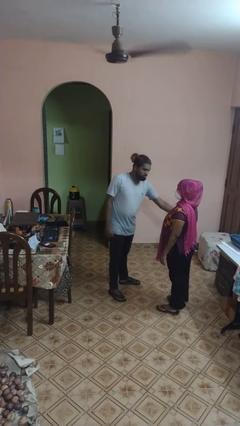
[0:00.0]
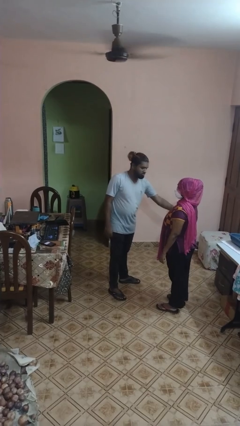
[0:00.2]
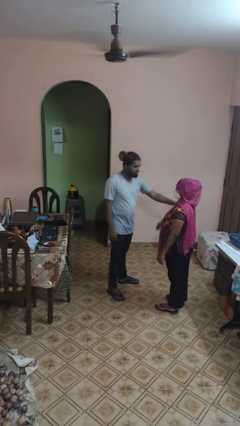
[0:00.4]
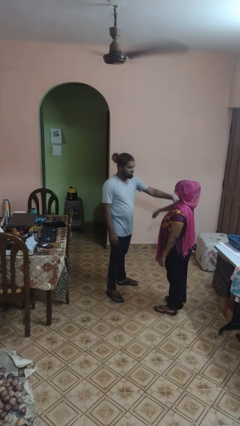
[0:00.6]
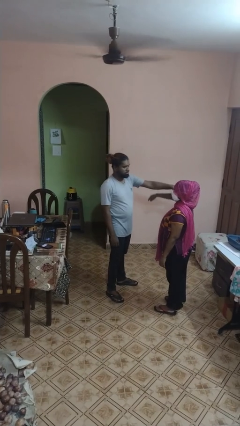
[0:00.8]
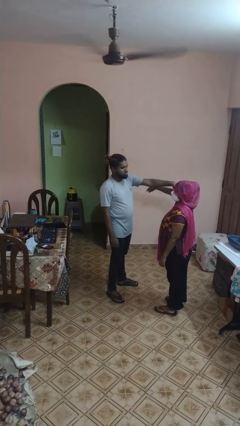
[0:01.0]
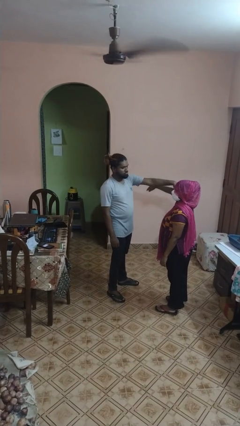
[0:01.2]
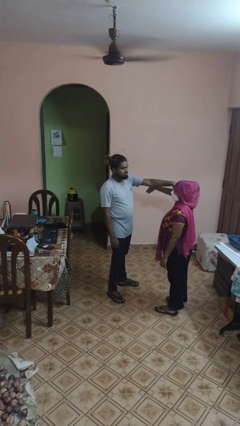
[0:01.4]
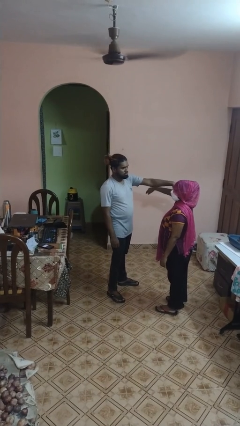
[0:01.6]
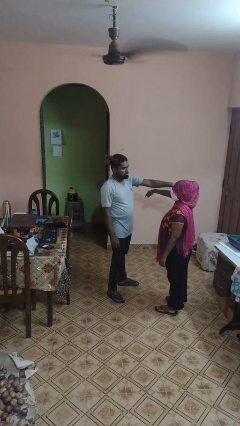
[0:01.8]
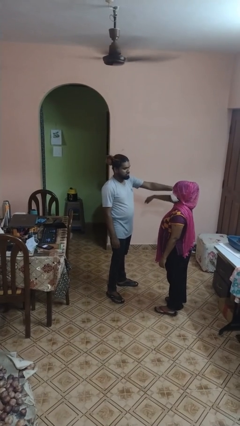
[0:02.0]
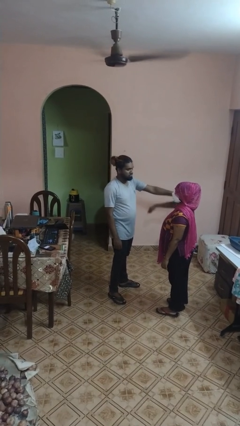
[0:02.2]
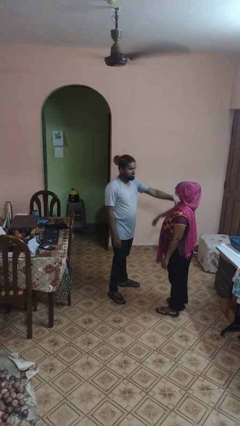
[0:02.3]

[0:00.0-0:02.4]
person grabs person by bicep

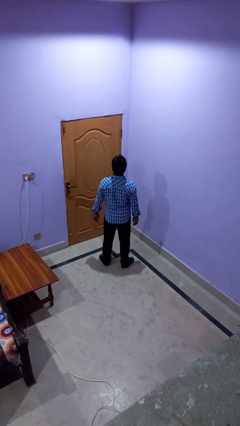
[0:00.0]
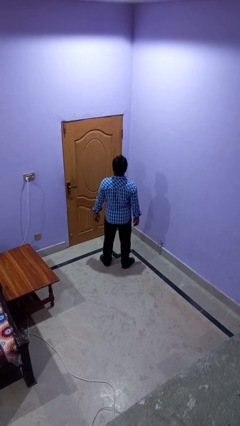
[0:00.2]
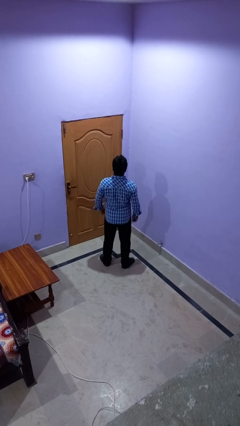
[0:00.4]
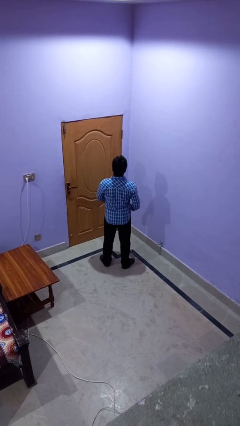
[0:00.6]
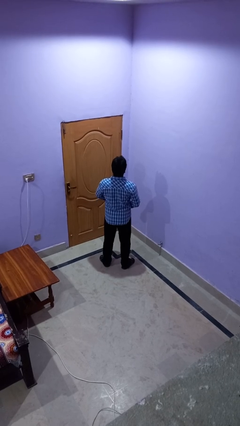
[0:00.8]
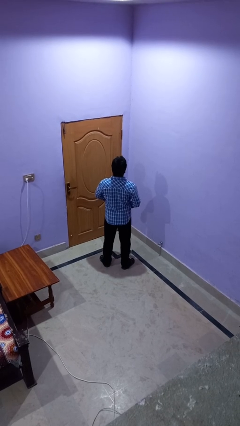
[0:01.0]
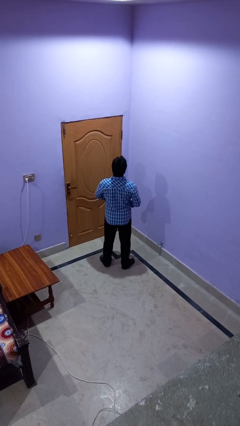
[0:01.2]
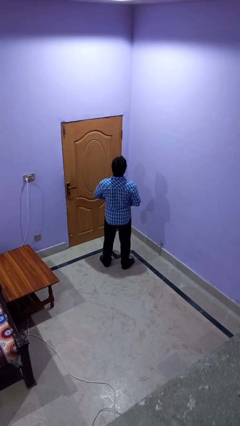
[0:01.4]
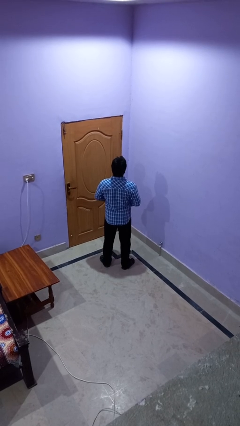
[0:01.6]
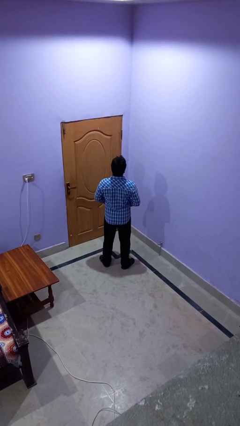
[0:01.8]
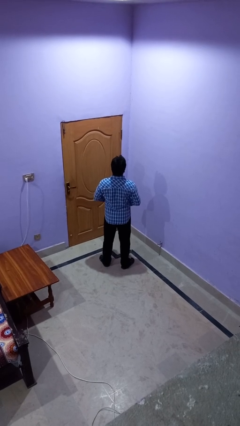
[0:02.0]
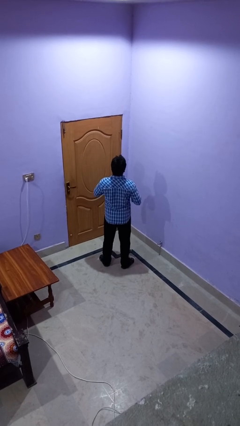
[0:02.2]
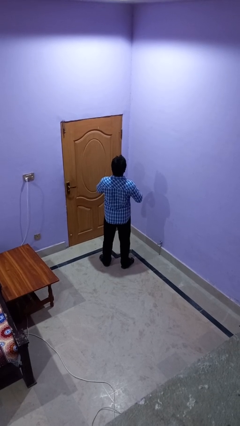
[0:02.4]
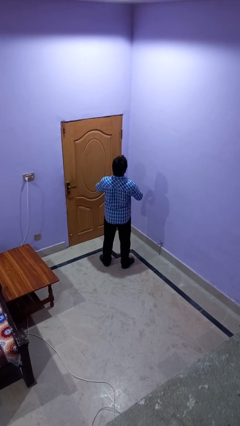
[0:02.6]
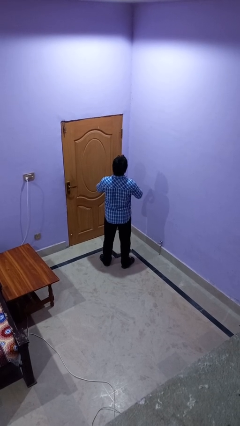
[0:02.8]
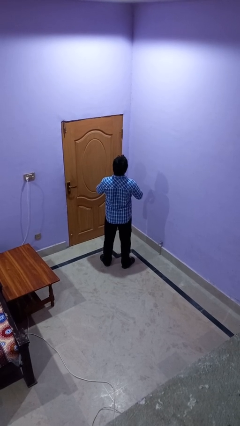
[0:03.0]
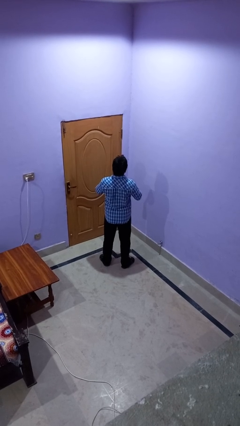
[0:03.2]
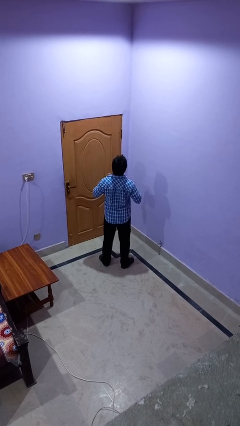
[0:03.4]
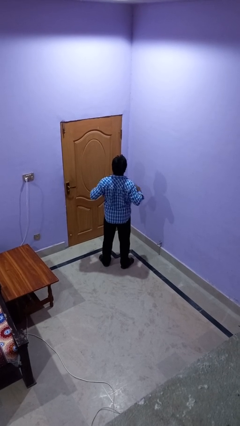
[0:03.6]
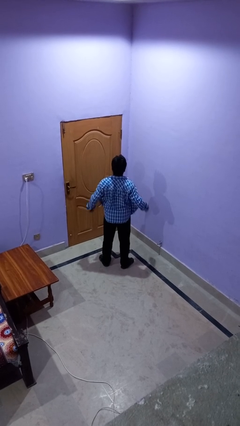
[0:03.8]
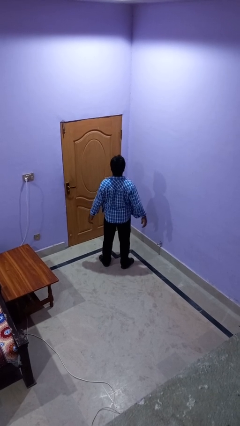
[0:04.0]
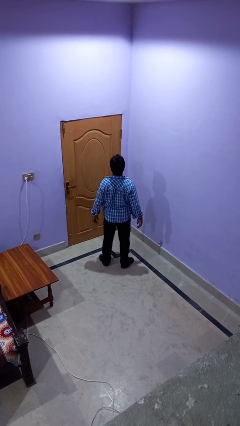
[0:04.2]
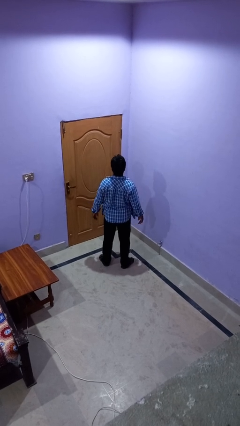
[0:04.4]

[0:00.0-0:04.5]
person unbuttons shirt

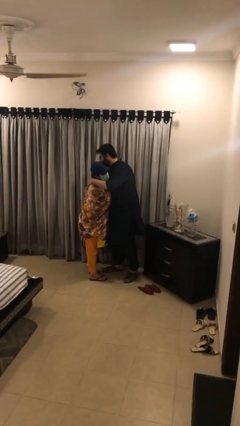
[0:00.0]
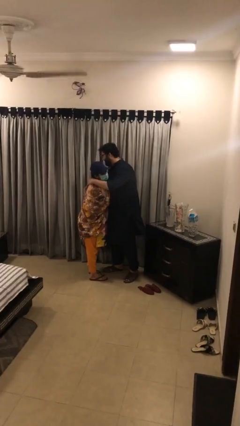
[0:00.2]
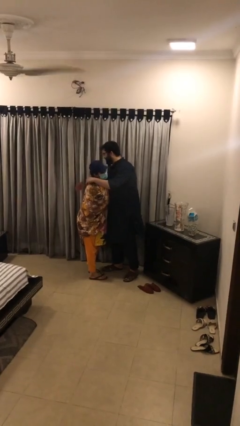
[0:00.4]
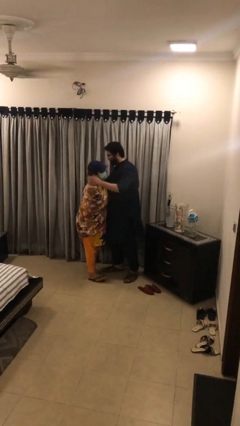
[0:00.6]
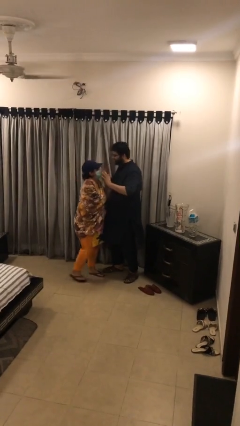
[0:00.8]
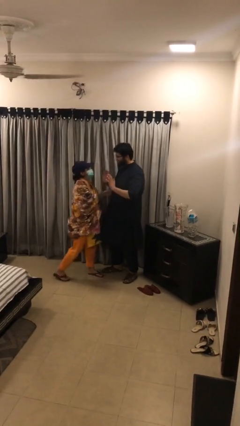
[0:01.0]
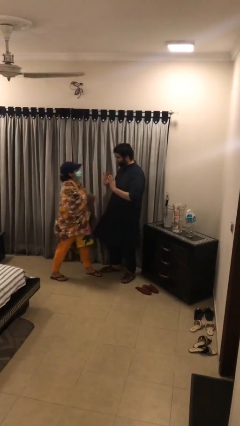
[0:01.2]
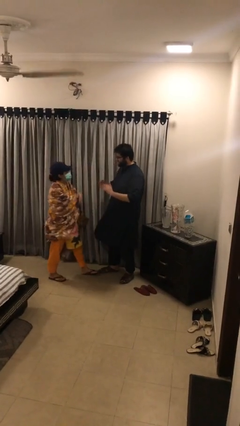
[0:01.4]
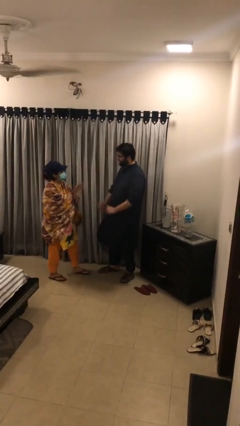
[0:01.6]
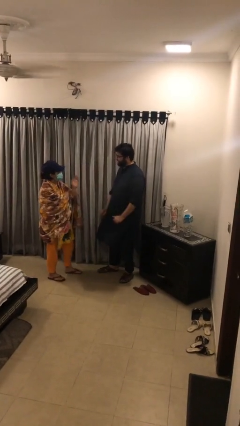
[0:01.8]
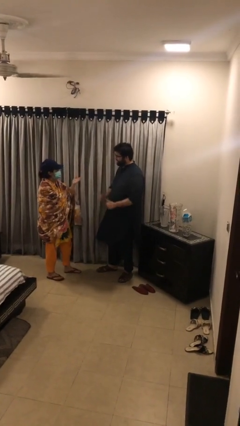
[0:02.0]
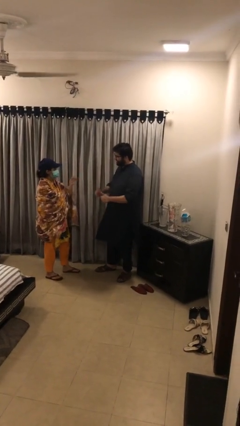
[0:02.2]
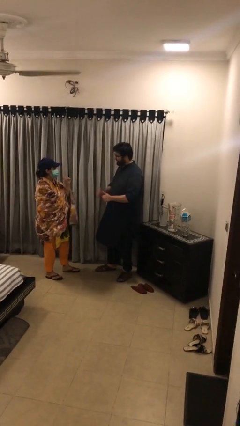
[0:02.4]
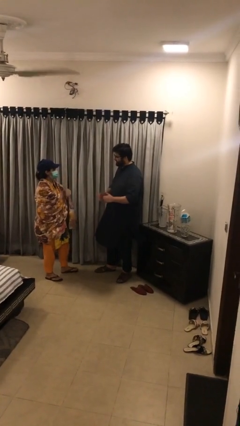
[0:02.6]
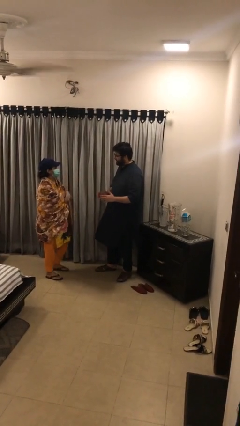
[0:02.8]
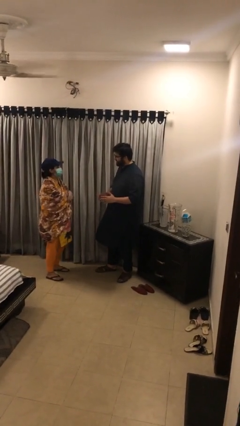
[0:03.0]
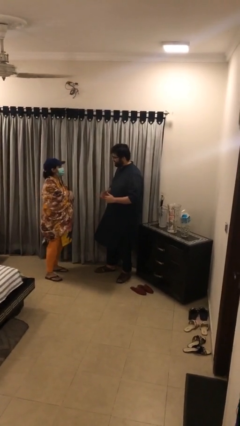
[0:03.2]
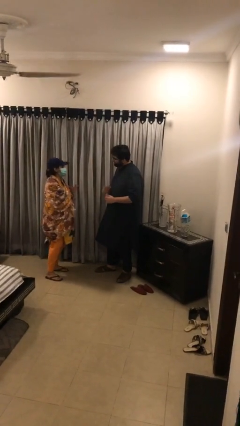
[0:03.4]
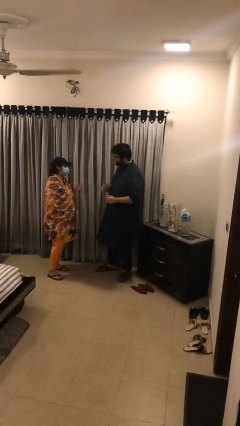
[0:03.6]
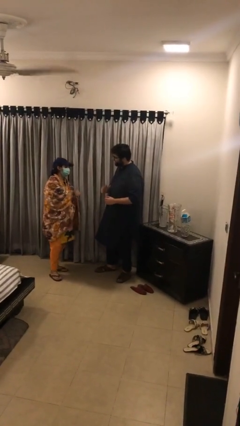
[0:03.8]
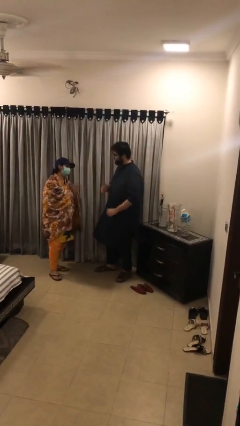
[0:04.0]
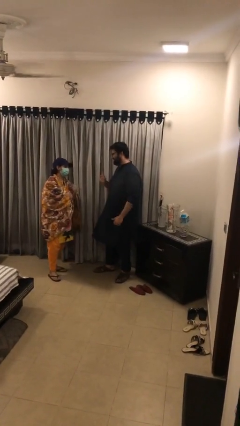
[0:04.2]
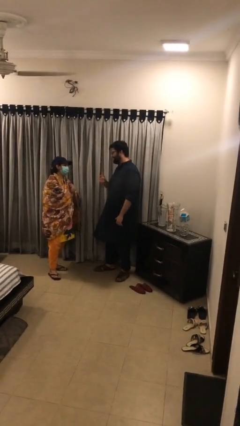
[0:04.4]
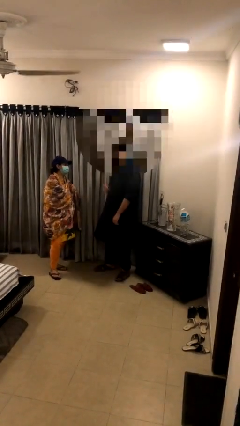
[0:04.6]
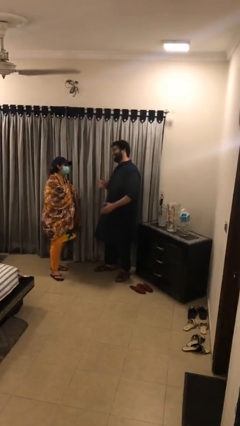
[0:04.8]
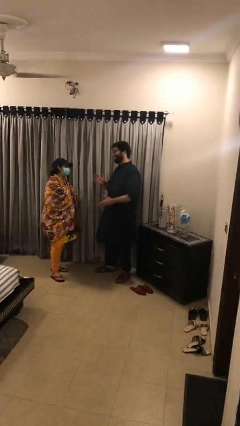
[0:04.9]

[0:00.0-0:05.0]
person talks to person

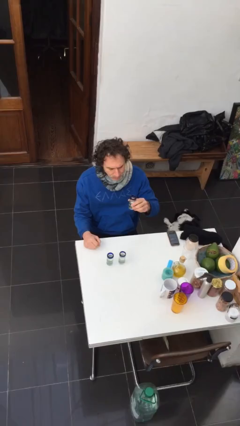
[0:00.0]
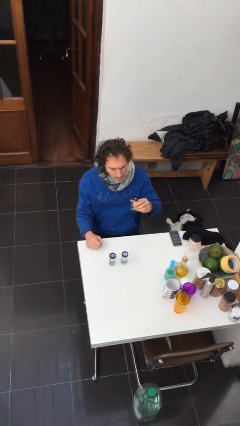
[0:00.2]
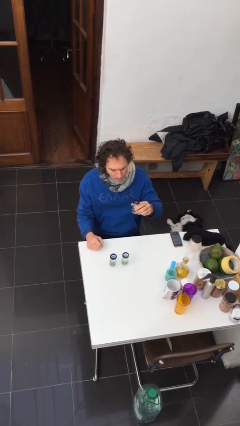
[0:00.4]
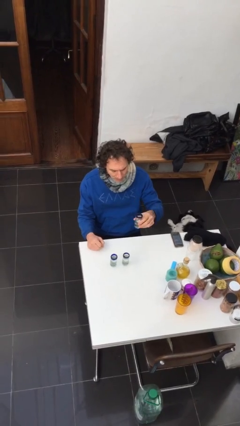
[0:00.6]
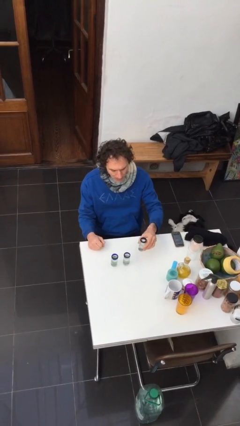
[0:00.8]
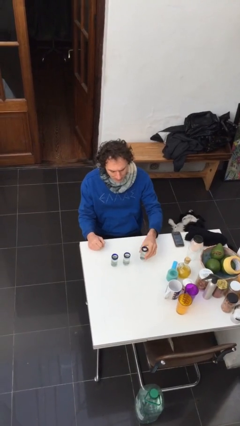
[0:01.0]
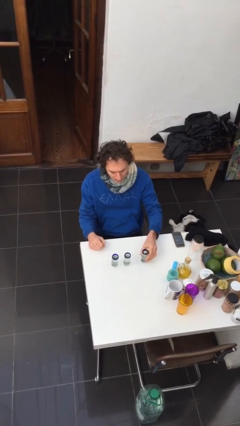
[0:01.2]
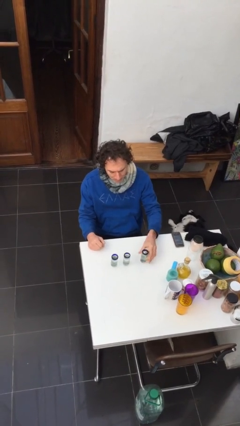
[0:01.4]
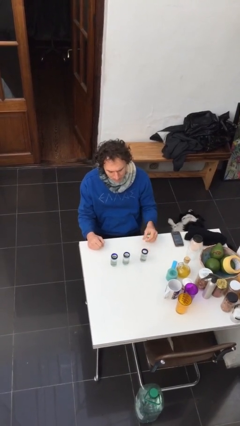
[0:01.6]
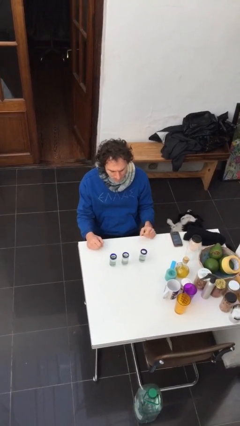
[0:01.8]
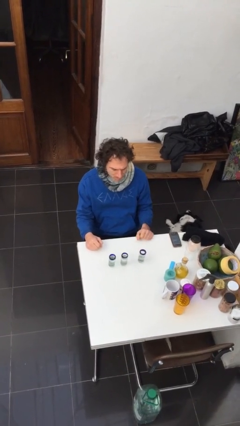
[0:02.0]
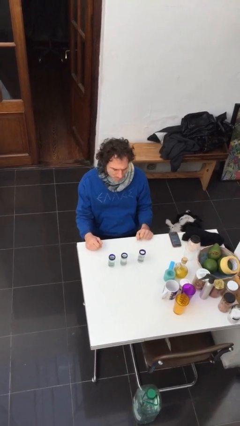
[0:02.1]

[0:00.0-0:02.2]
person puts down object on table

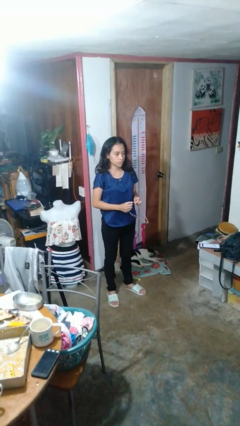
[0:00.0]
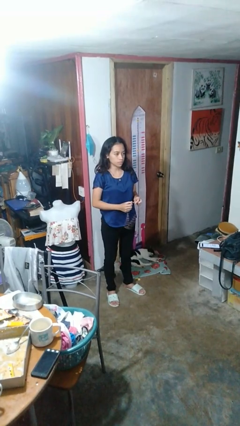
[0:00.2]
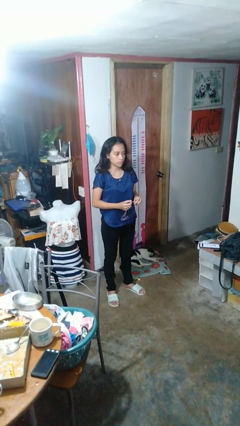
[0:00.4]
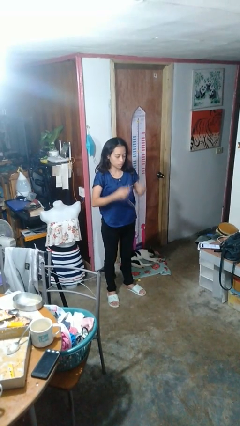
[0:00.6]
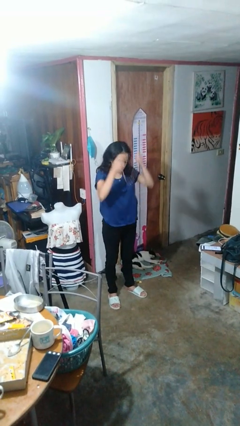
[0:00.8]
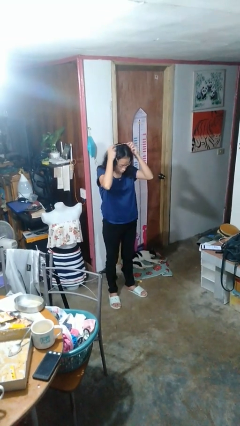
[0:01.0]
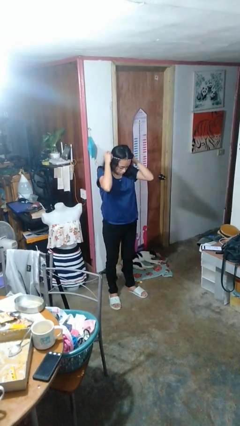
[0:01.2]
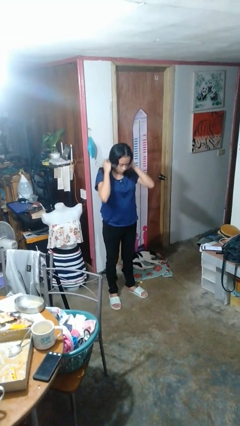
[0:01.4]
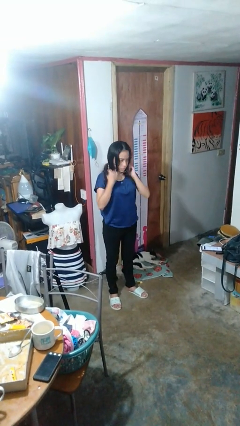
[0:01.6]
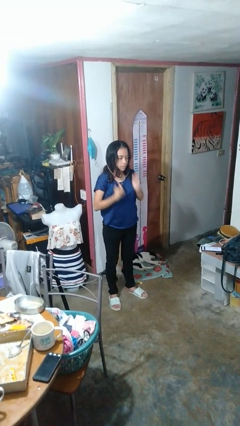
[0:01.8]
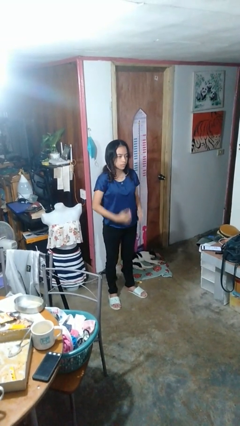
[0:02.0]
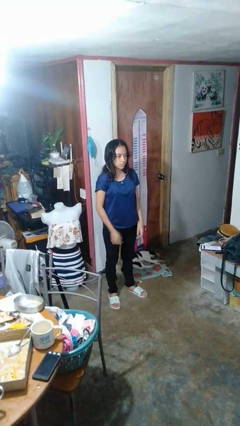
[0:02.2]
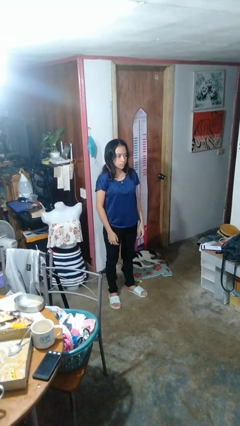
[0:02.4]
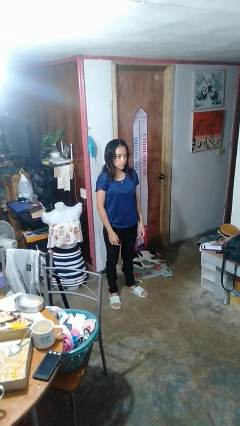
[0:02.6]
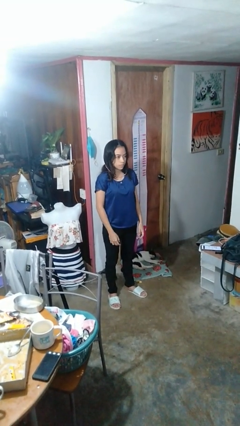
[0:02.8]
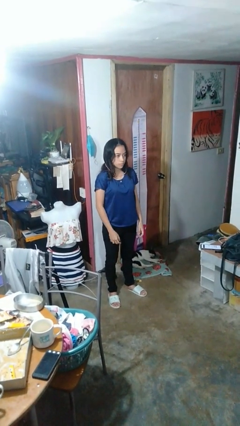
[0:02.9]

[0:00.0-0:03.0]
person puts on necklace
